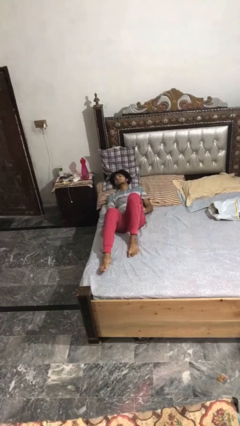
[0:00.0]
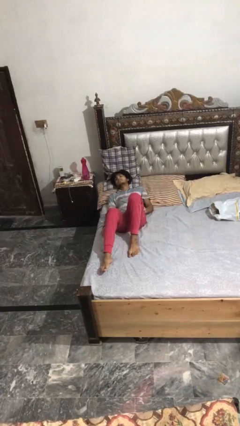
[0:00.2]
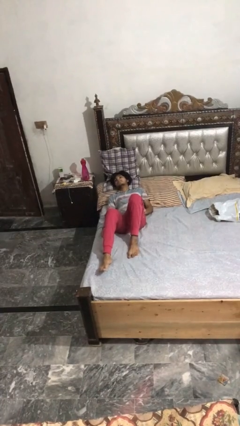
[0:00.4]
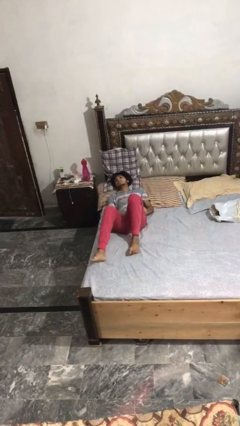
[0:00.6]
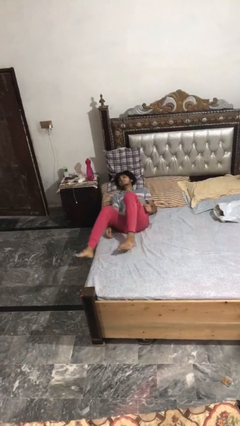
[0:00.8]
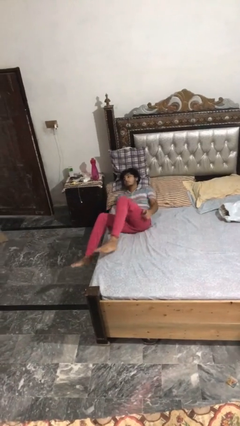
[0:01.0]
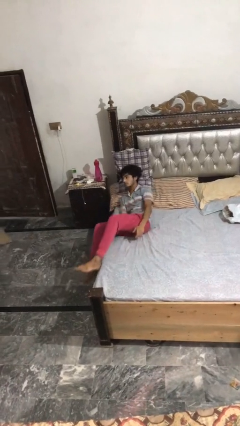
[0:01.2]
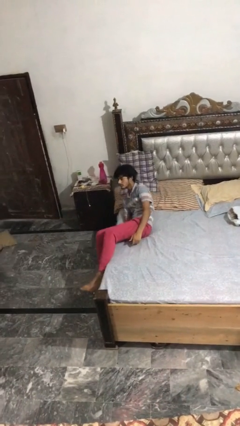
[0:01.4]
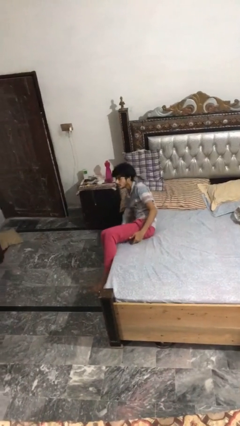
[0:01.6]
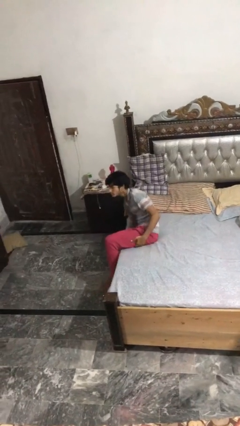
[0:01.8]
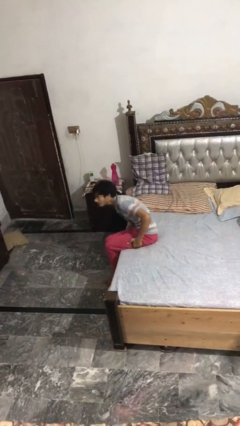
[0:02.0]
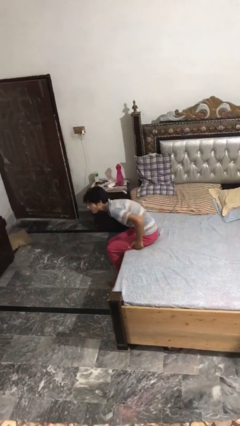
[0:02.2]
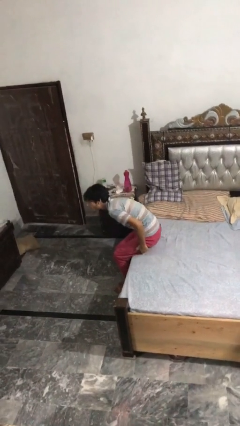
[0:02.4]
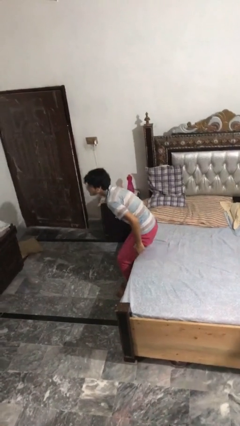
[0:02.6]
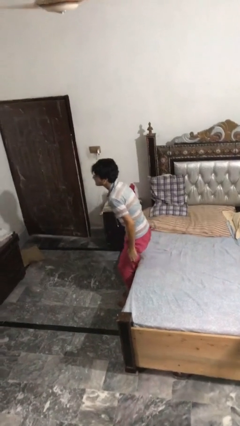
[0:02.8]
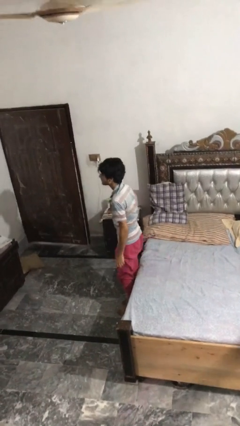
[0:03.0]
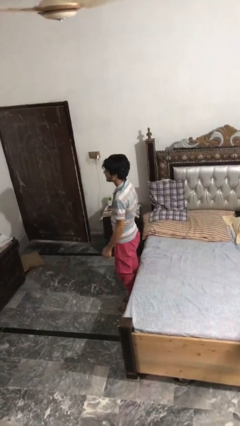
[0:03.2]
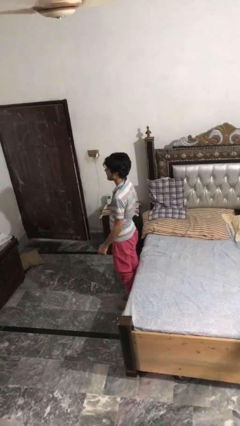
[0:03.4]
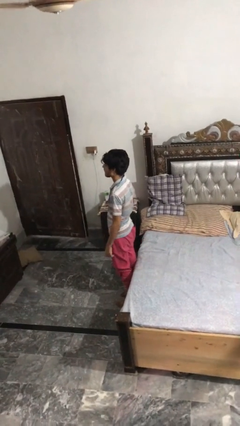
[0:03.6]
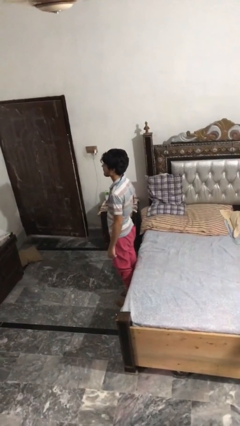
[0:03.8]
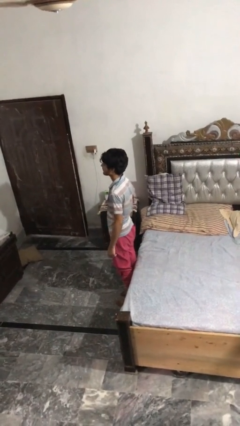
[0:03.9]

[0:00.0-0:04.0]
person stands up

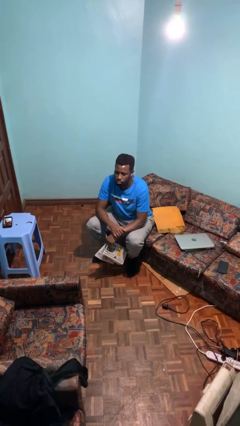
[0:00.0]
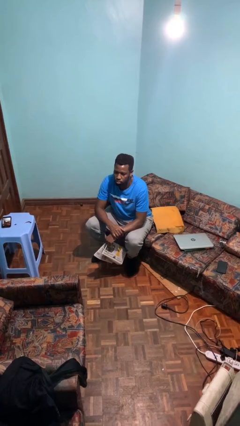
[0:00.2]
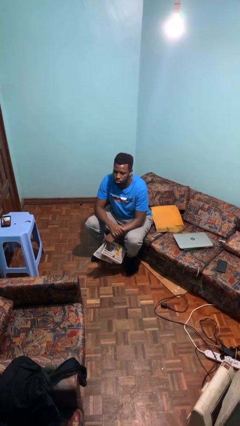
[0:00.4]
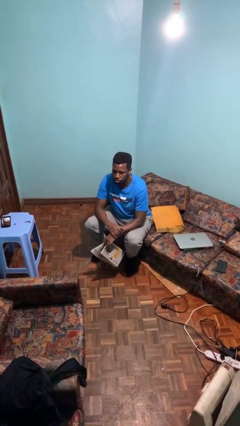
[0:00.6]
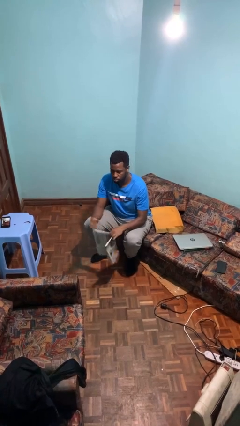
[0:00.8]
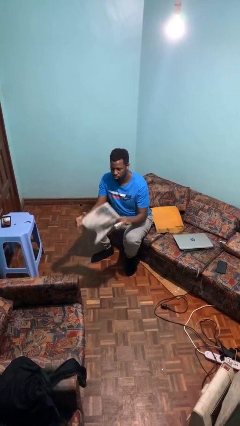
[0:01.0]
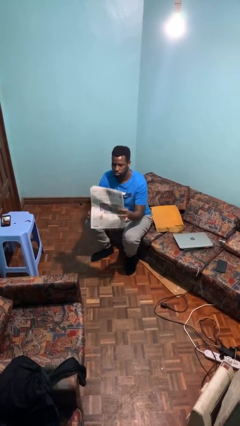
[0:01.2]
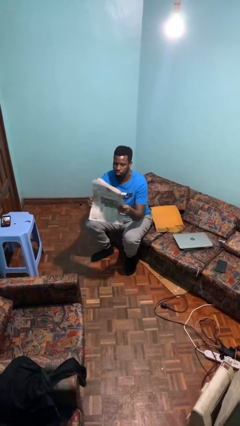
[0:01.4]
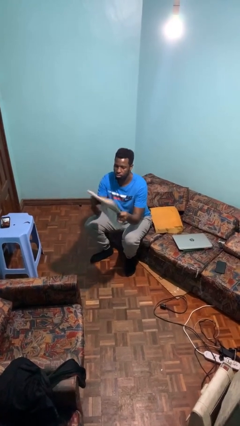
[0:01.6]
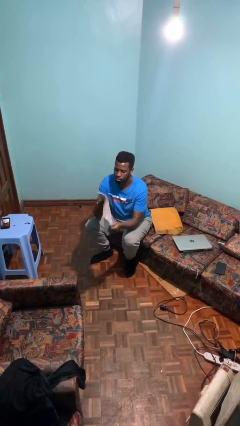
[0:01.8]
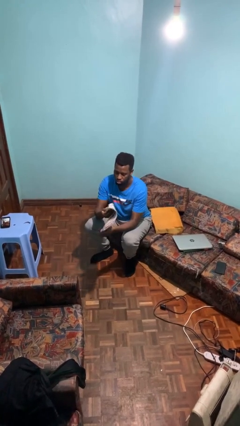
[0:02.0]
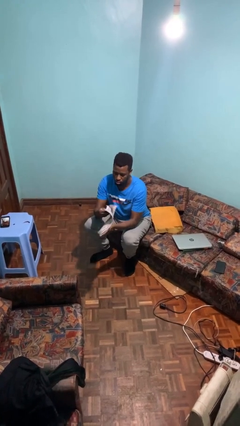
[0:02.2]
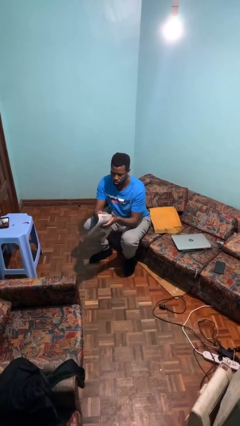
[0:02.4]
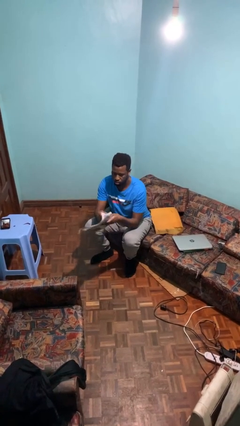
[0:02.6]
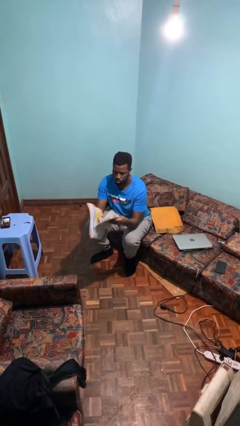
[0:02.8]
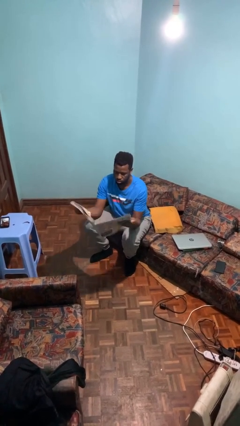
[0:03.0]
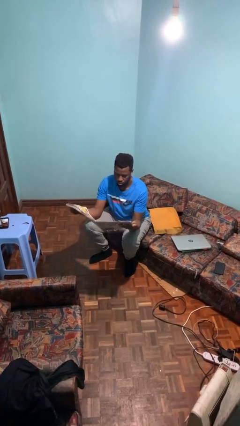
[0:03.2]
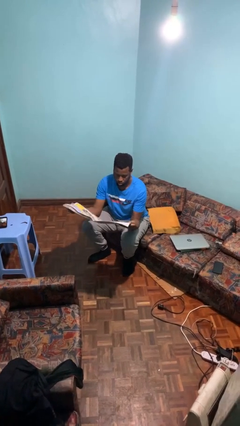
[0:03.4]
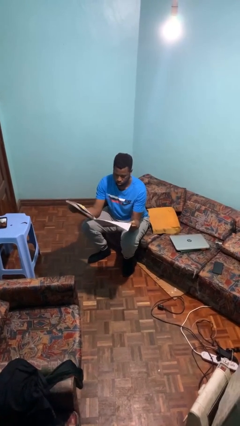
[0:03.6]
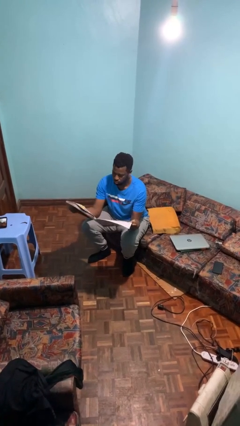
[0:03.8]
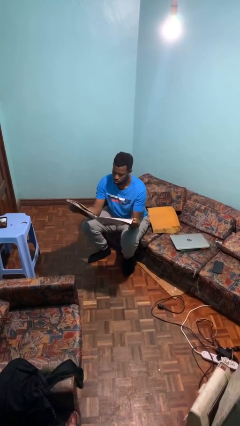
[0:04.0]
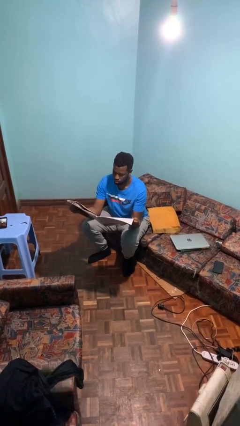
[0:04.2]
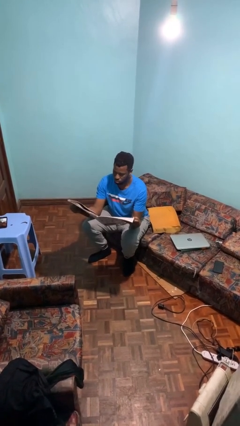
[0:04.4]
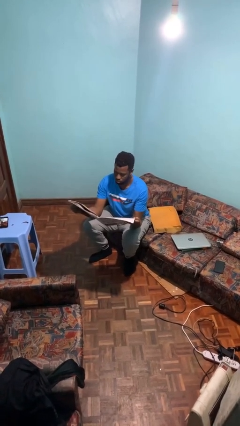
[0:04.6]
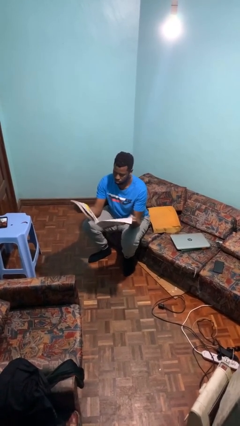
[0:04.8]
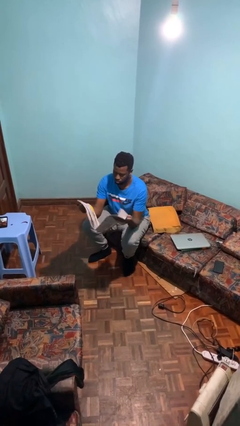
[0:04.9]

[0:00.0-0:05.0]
person reads newspaper

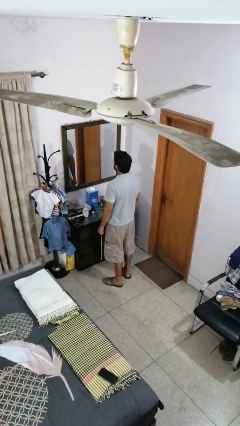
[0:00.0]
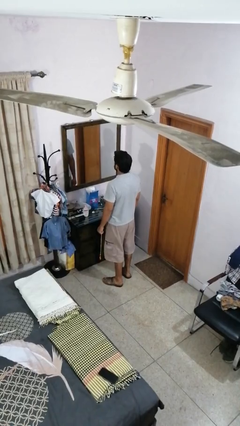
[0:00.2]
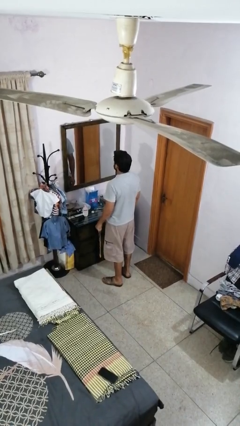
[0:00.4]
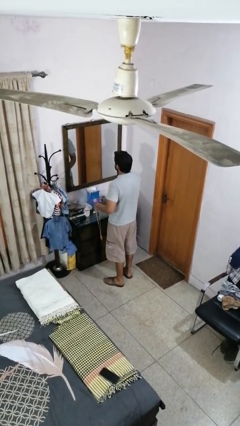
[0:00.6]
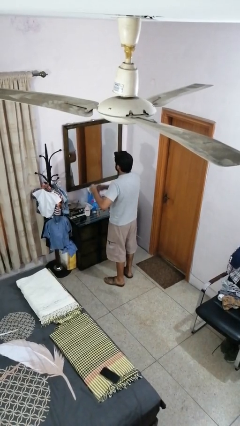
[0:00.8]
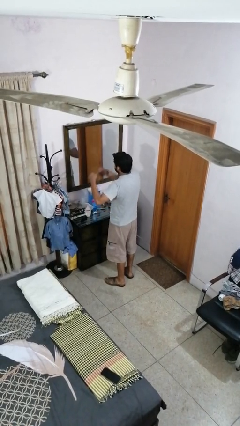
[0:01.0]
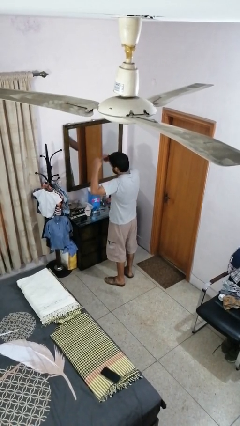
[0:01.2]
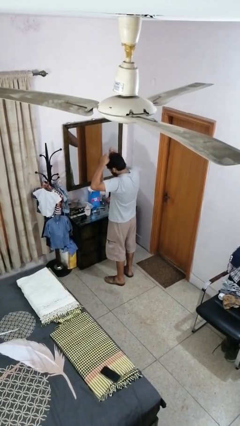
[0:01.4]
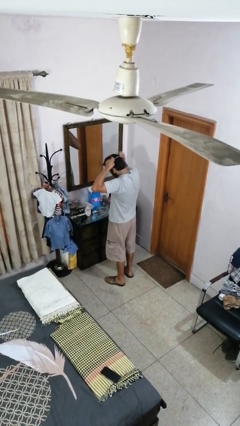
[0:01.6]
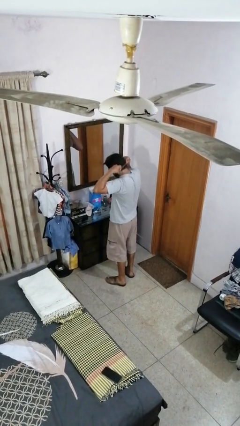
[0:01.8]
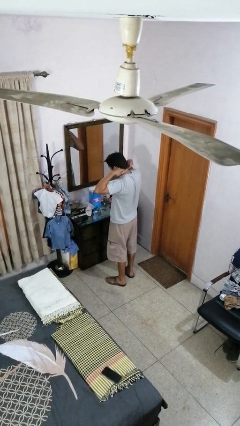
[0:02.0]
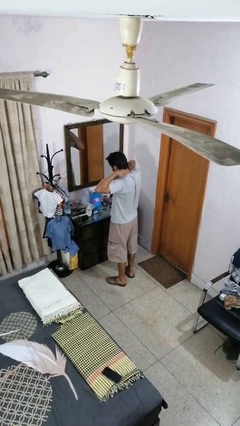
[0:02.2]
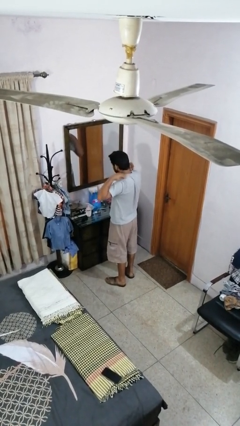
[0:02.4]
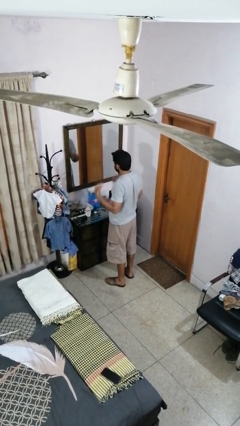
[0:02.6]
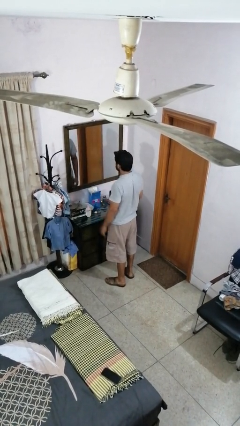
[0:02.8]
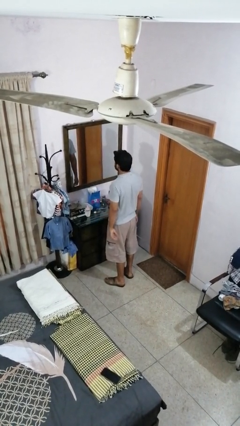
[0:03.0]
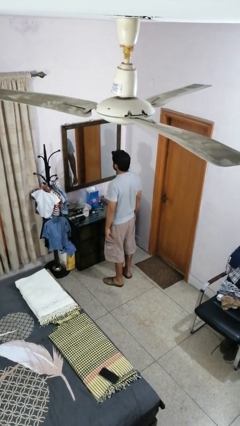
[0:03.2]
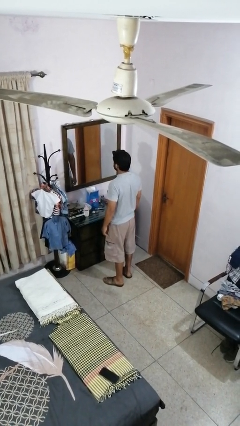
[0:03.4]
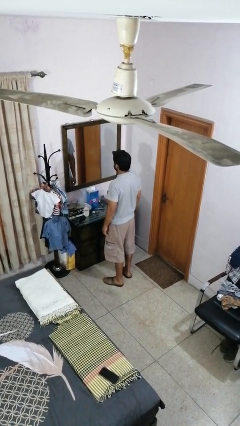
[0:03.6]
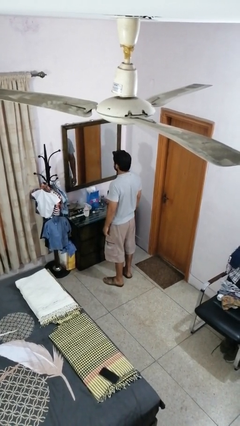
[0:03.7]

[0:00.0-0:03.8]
person puts on necklace

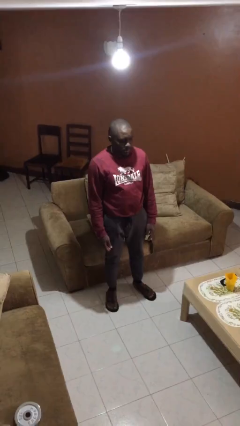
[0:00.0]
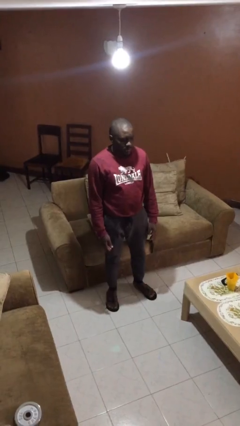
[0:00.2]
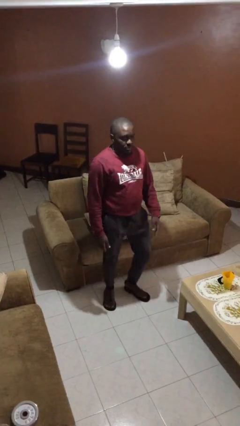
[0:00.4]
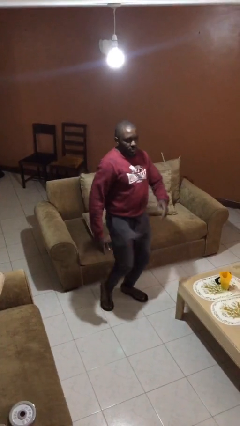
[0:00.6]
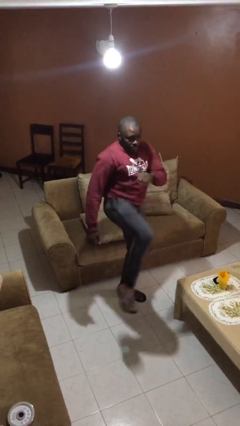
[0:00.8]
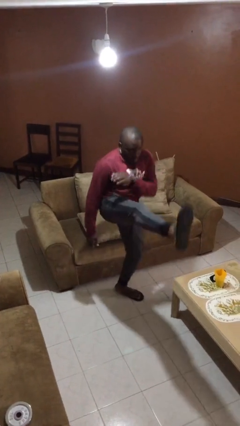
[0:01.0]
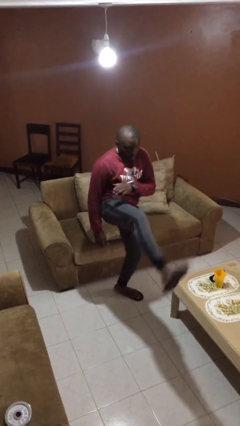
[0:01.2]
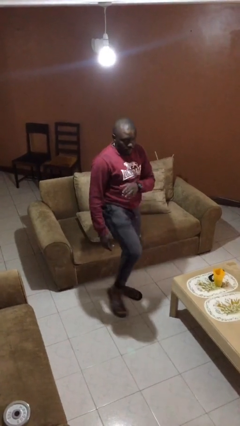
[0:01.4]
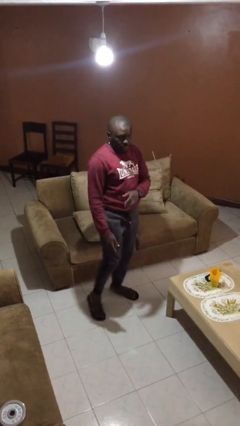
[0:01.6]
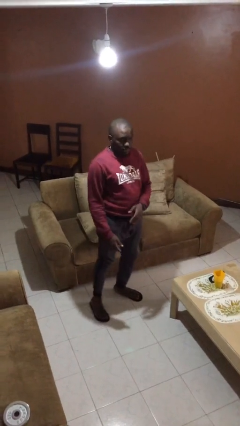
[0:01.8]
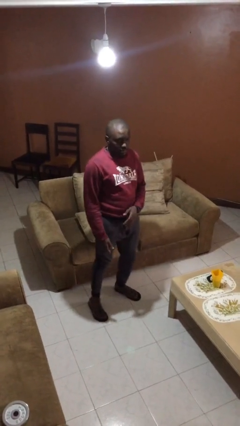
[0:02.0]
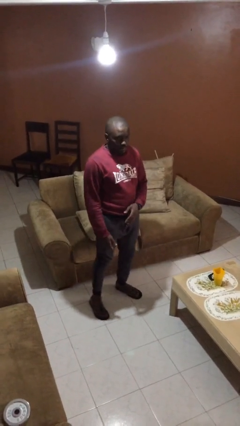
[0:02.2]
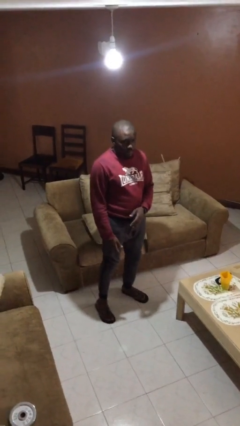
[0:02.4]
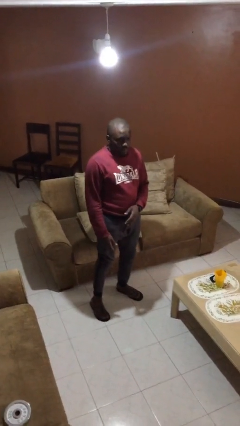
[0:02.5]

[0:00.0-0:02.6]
person karate kicks

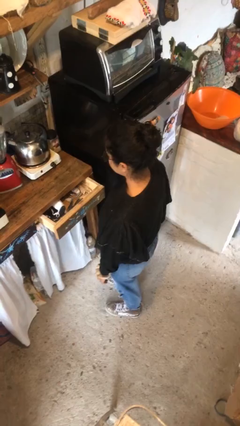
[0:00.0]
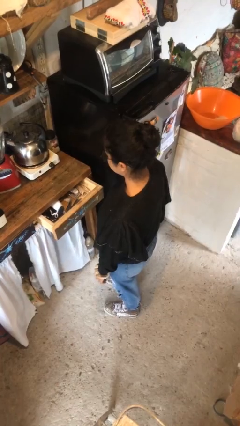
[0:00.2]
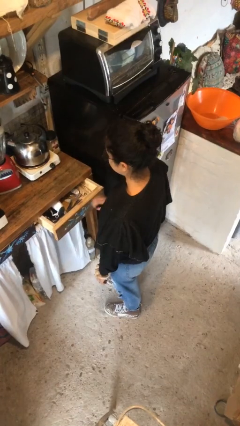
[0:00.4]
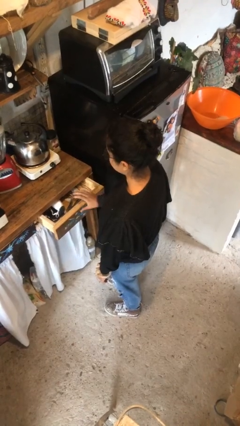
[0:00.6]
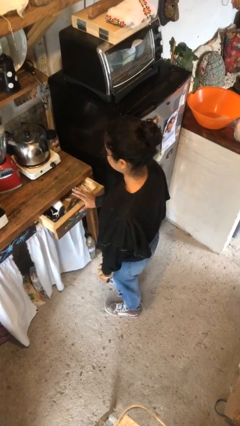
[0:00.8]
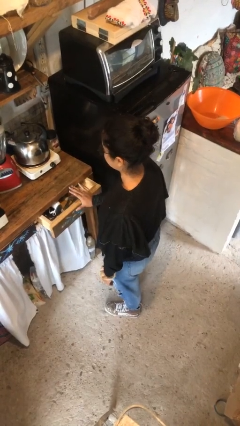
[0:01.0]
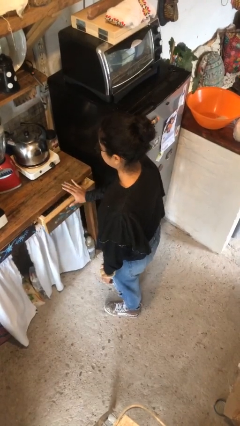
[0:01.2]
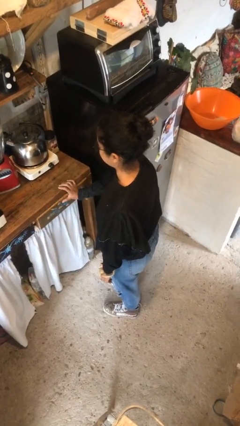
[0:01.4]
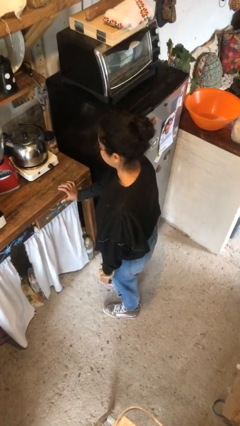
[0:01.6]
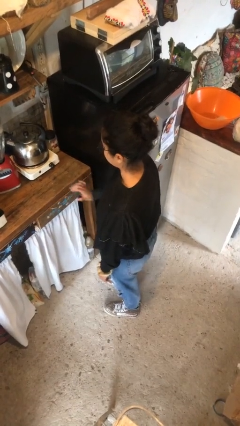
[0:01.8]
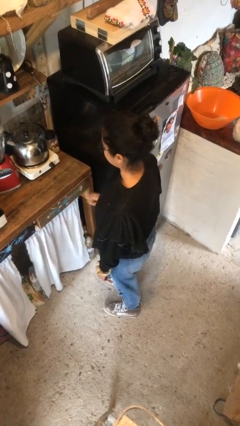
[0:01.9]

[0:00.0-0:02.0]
person closes kitchen drawer
